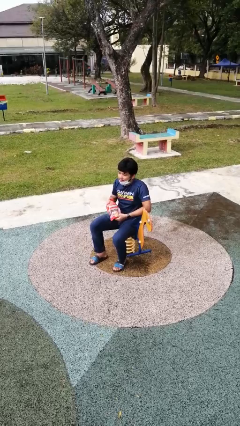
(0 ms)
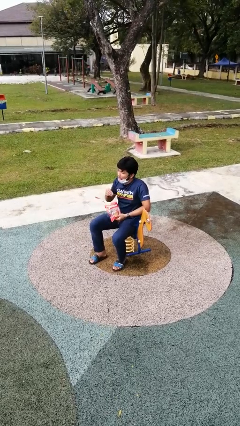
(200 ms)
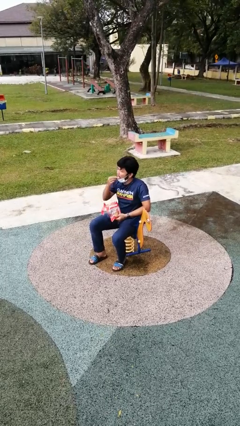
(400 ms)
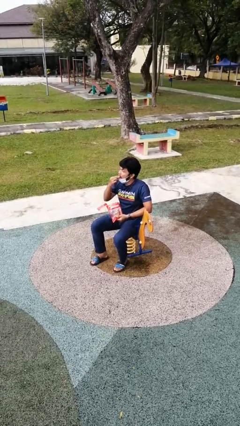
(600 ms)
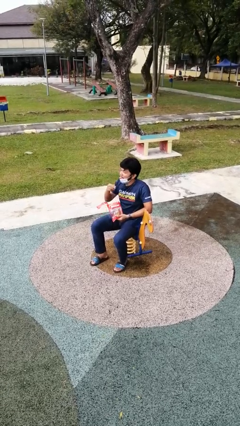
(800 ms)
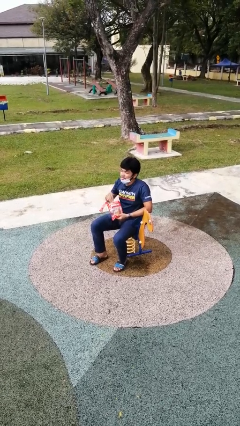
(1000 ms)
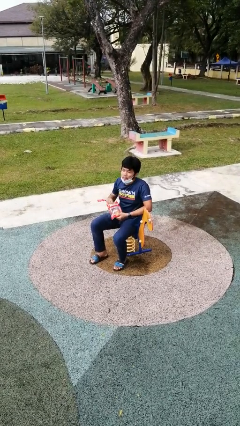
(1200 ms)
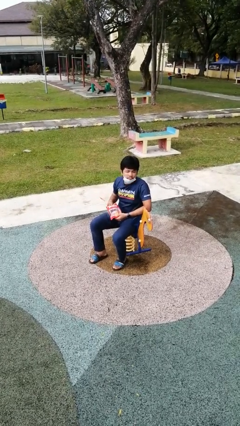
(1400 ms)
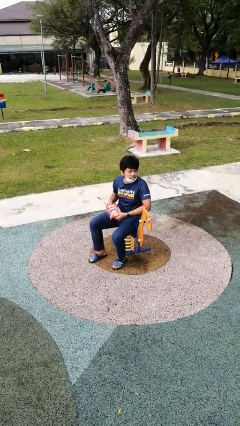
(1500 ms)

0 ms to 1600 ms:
person eats snack from bag

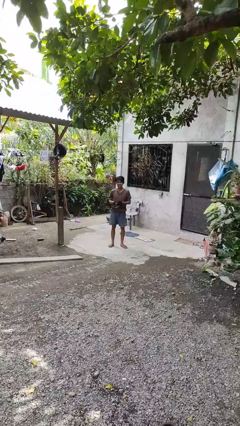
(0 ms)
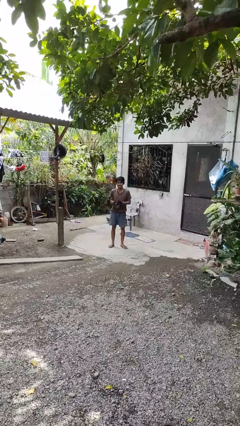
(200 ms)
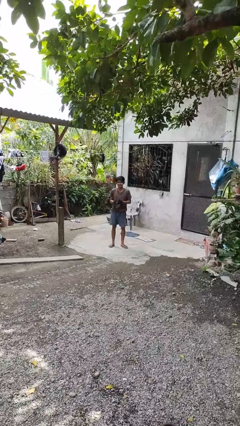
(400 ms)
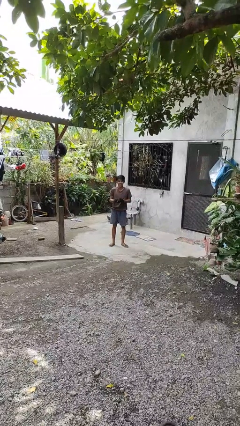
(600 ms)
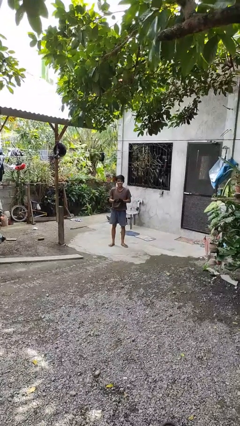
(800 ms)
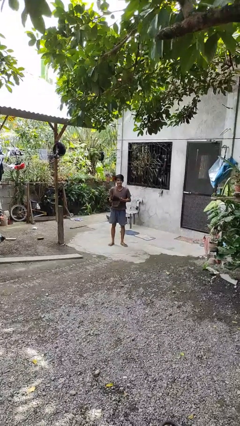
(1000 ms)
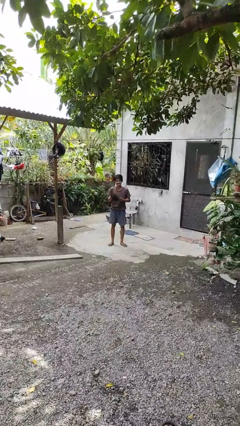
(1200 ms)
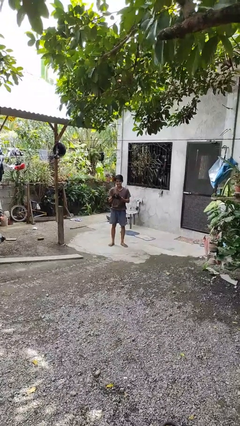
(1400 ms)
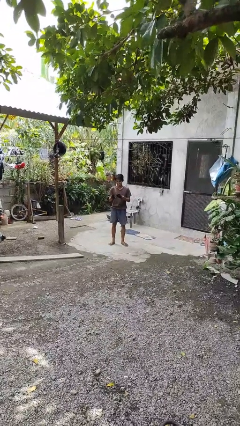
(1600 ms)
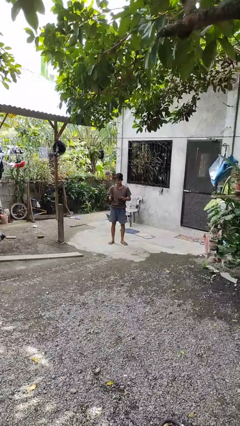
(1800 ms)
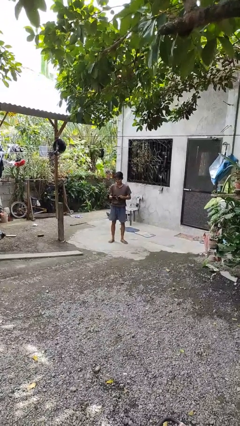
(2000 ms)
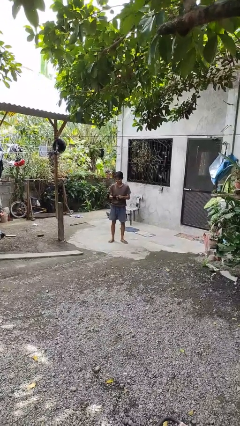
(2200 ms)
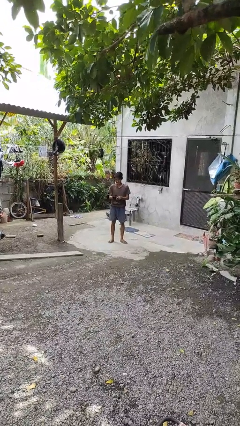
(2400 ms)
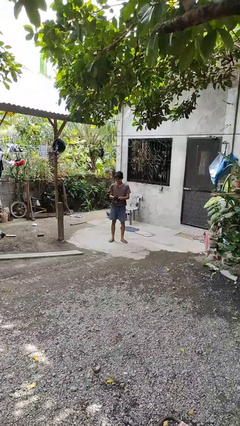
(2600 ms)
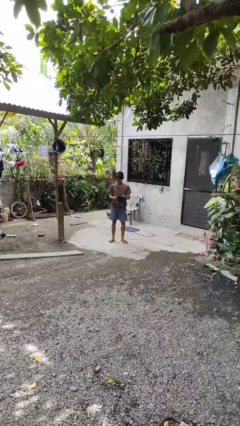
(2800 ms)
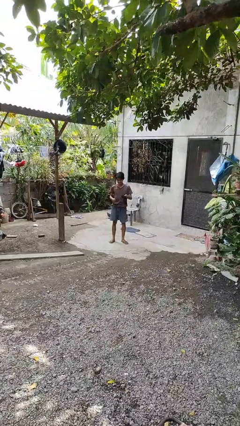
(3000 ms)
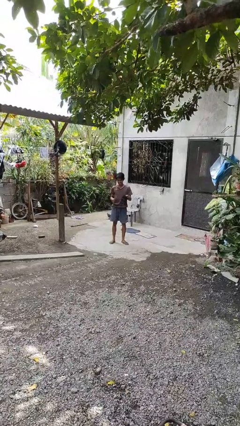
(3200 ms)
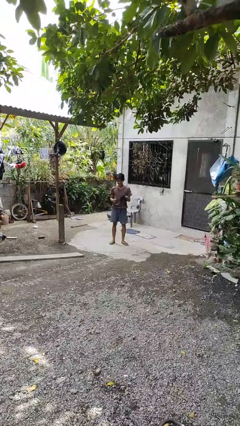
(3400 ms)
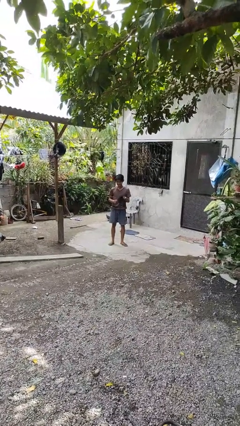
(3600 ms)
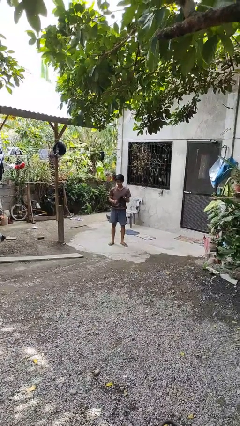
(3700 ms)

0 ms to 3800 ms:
person takes off gloves

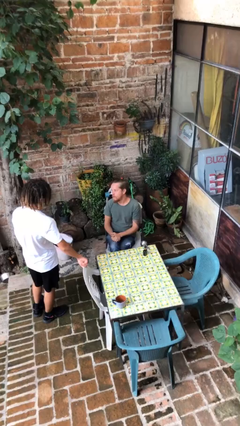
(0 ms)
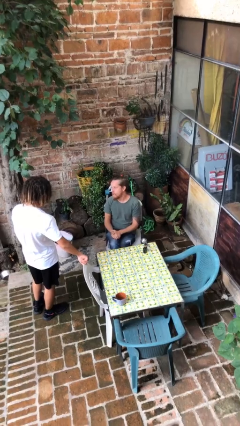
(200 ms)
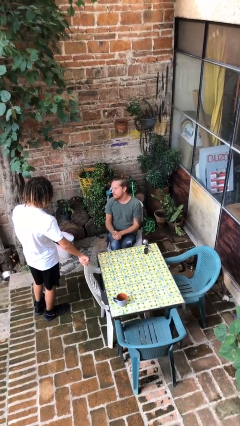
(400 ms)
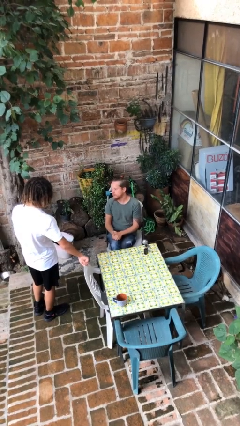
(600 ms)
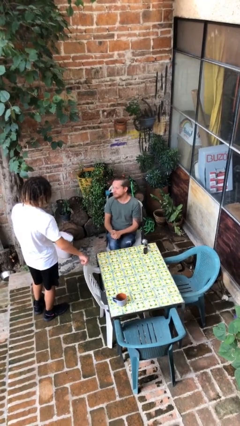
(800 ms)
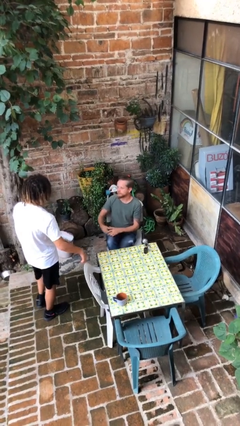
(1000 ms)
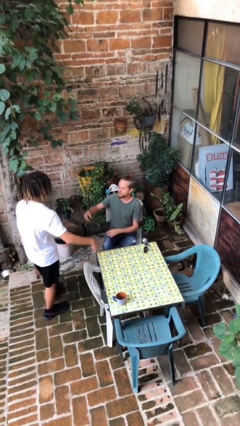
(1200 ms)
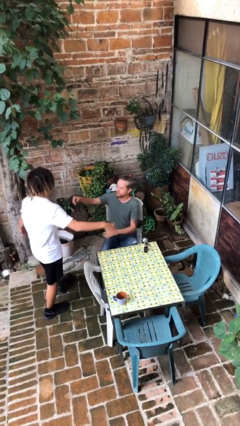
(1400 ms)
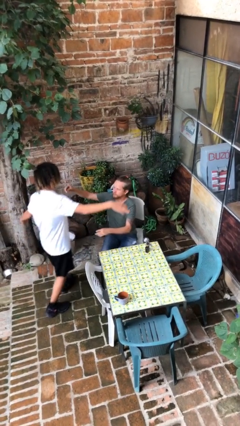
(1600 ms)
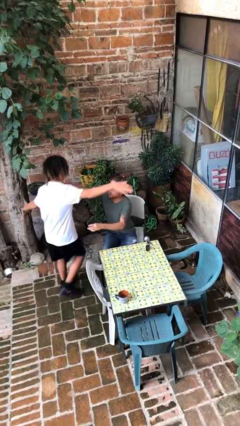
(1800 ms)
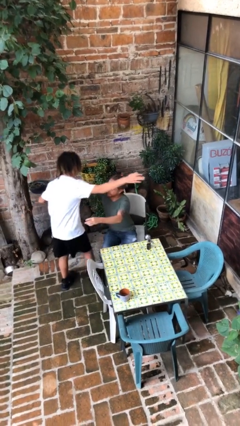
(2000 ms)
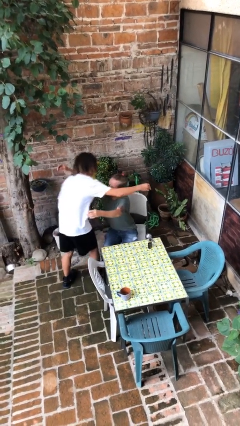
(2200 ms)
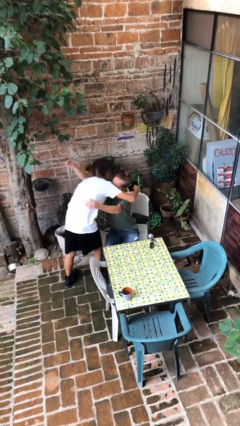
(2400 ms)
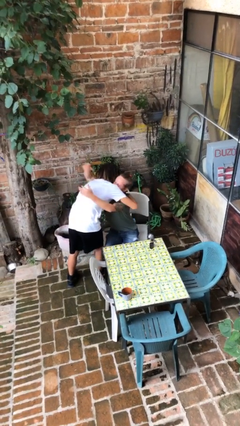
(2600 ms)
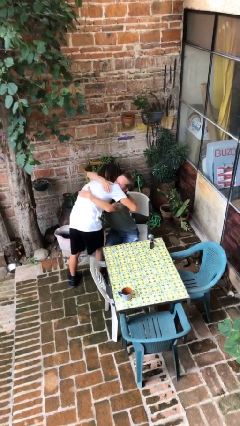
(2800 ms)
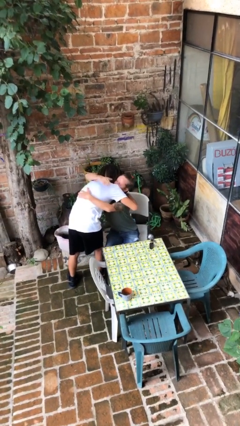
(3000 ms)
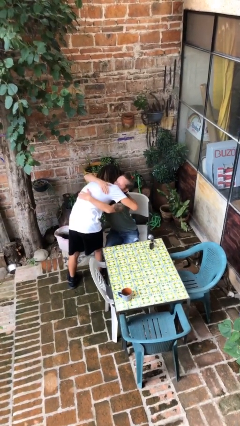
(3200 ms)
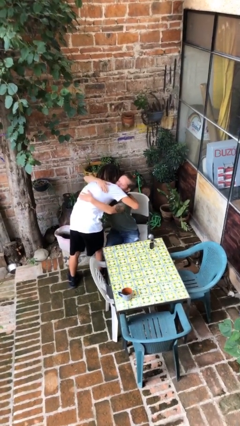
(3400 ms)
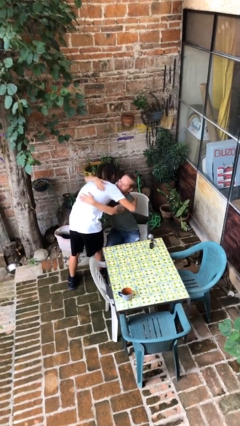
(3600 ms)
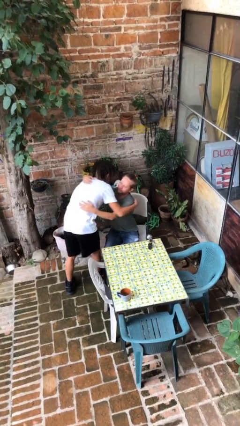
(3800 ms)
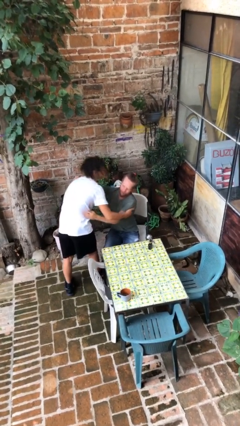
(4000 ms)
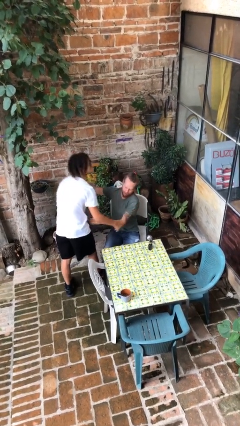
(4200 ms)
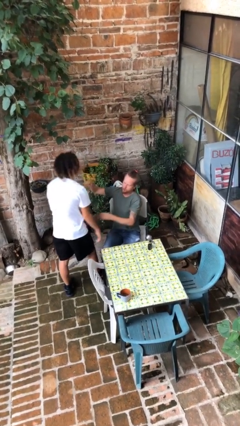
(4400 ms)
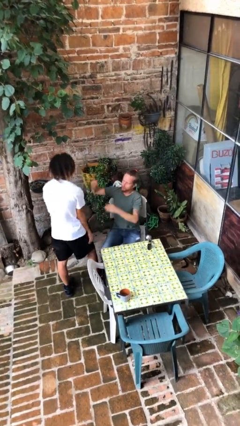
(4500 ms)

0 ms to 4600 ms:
person embraces person

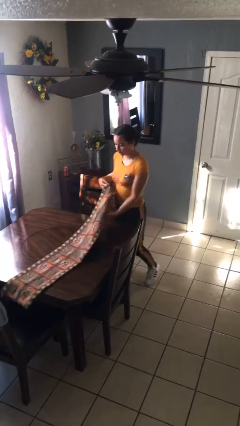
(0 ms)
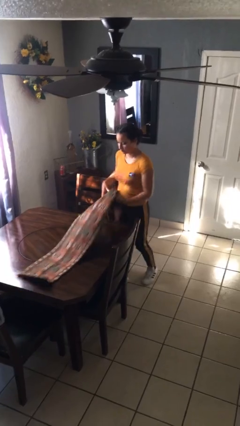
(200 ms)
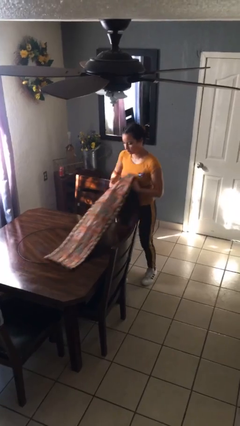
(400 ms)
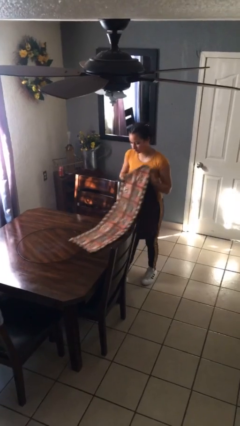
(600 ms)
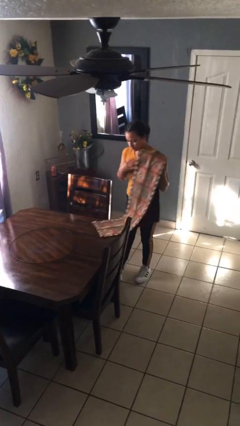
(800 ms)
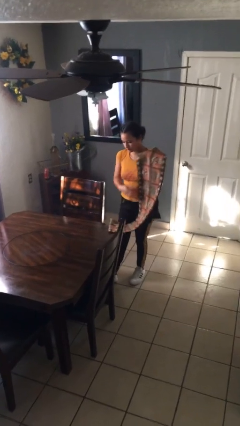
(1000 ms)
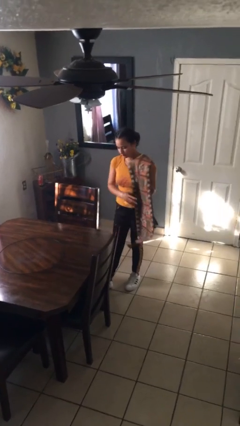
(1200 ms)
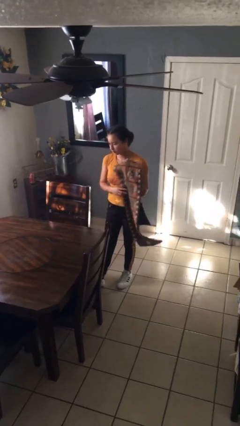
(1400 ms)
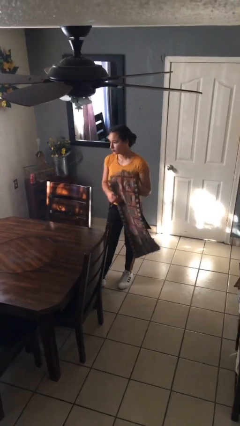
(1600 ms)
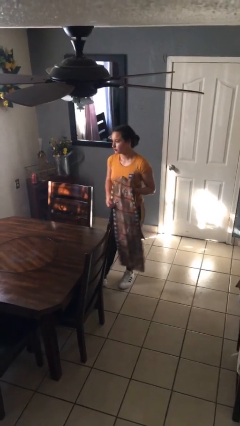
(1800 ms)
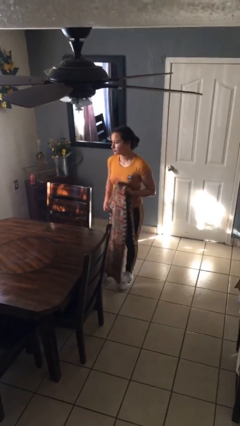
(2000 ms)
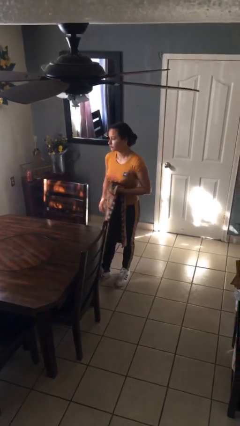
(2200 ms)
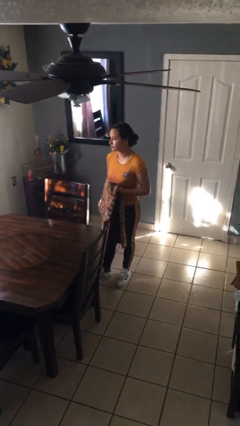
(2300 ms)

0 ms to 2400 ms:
person folds tablecloth

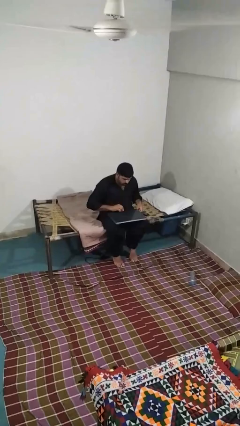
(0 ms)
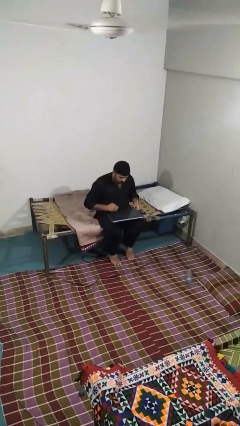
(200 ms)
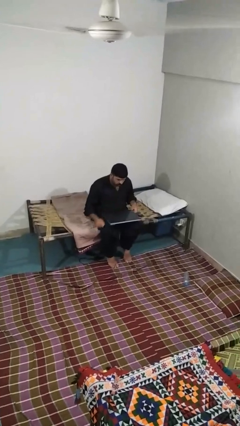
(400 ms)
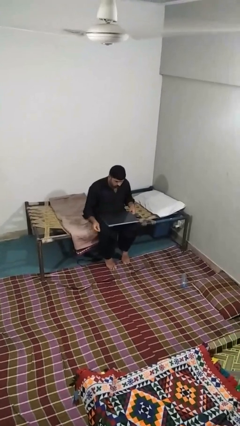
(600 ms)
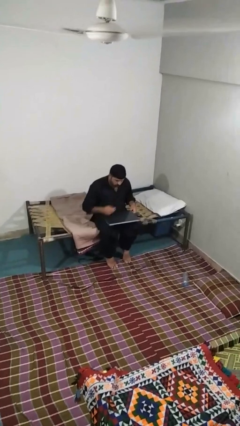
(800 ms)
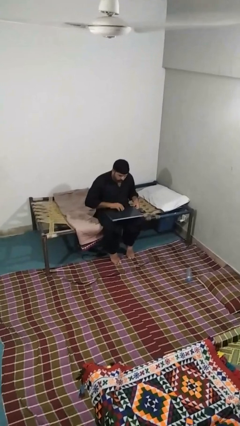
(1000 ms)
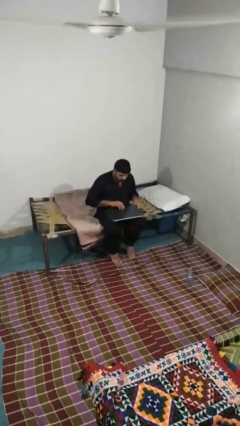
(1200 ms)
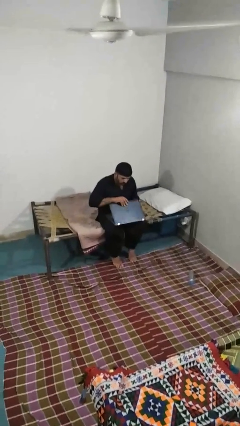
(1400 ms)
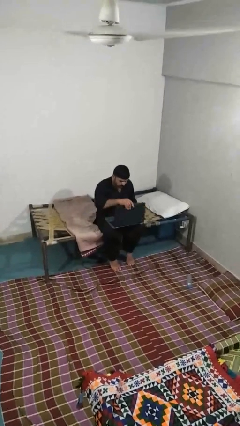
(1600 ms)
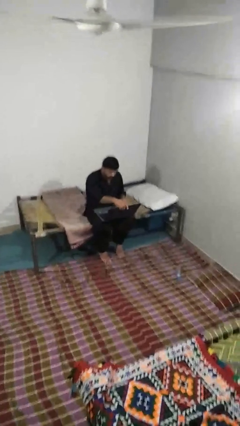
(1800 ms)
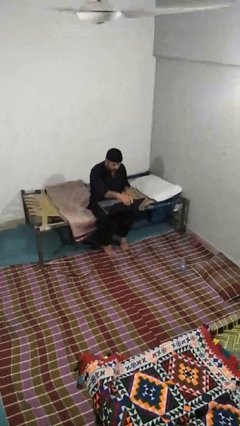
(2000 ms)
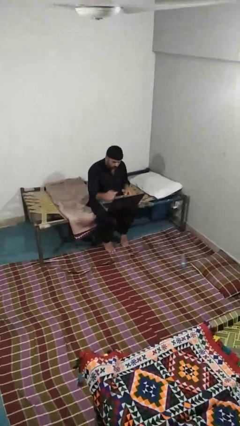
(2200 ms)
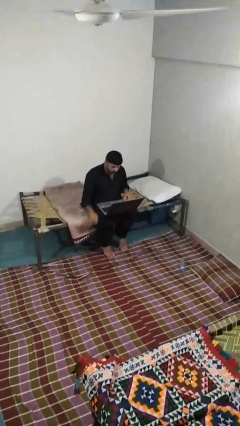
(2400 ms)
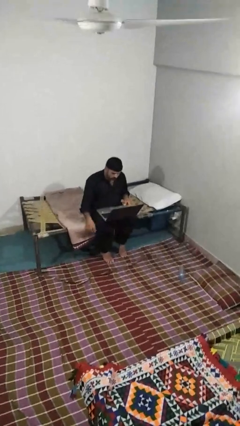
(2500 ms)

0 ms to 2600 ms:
person opens laptop

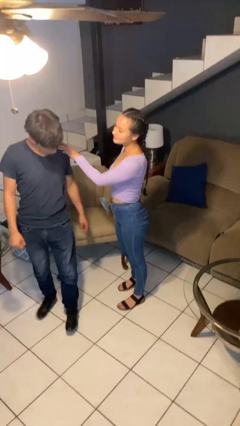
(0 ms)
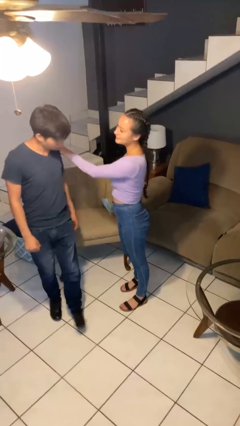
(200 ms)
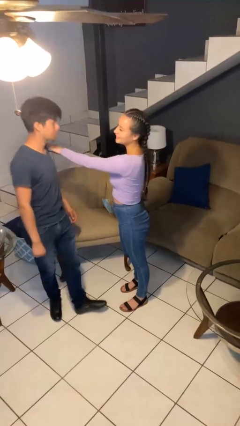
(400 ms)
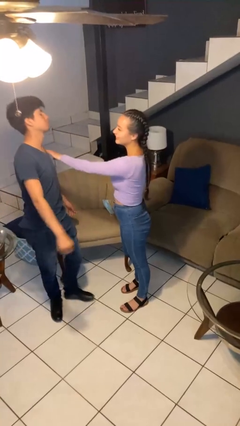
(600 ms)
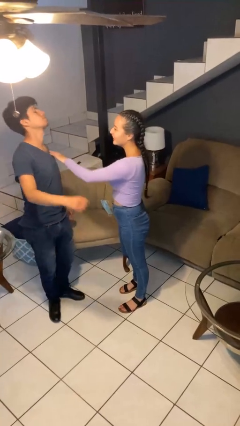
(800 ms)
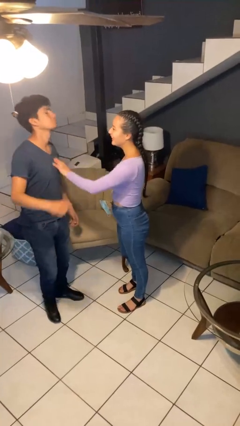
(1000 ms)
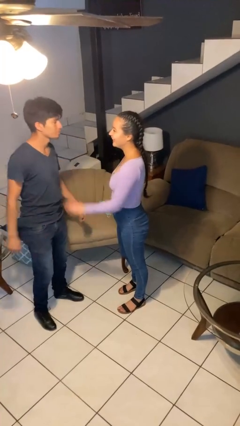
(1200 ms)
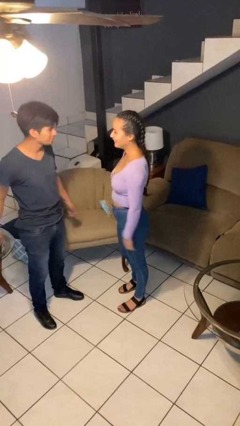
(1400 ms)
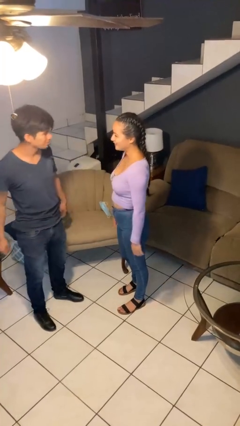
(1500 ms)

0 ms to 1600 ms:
person spins person around

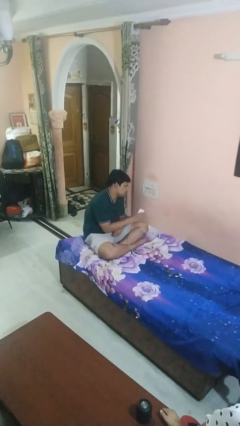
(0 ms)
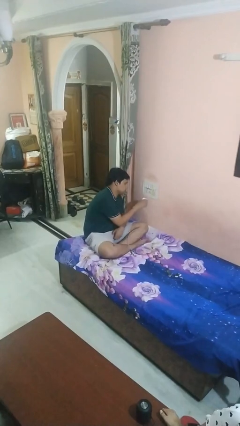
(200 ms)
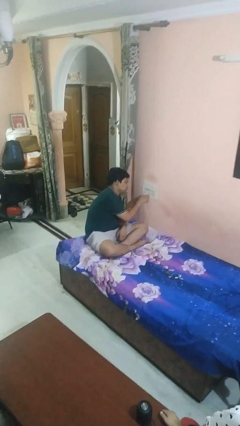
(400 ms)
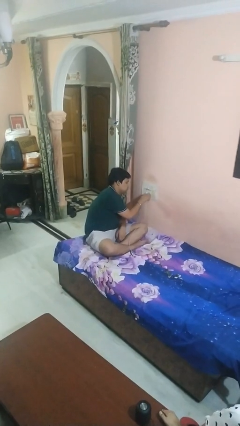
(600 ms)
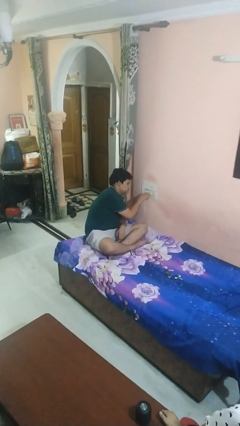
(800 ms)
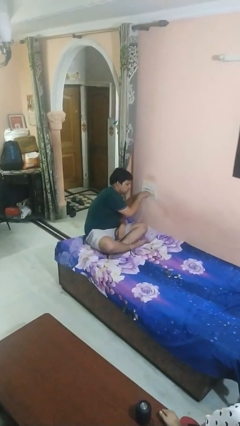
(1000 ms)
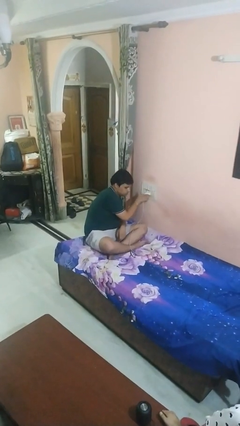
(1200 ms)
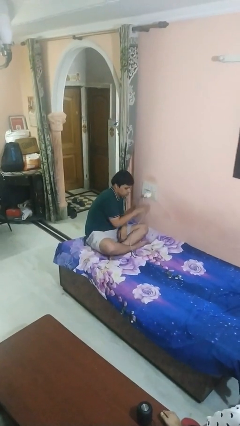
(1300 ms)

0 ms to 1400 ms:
person plugs into electrical socket
